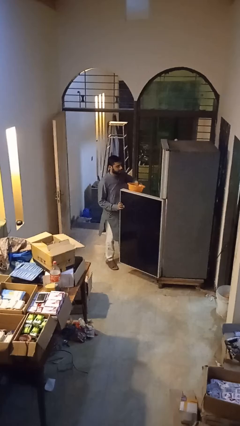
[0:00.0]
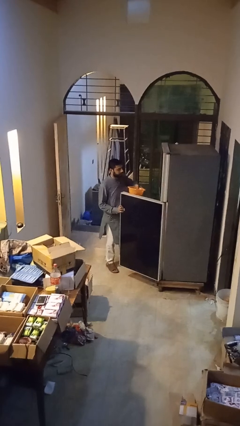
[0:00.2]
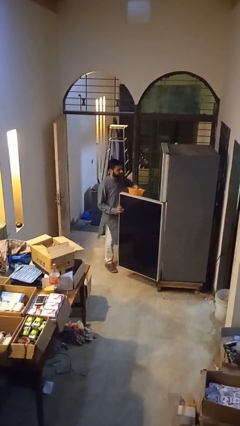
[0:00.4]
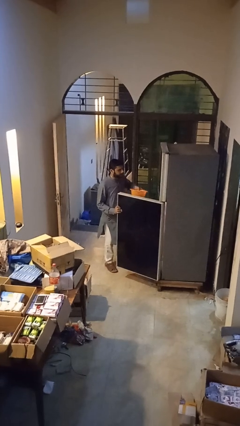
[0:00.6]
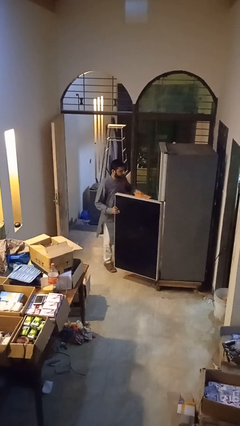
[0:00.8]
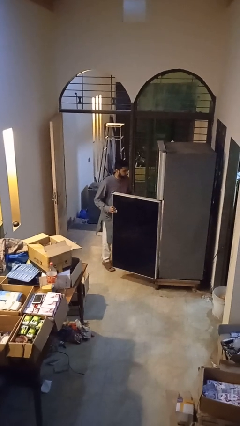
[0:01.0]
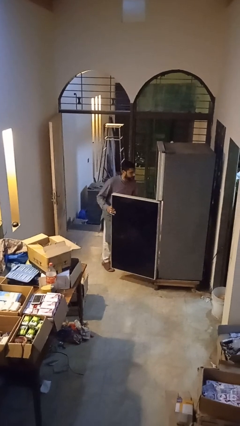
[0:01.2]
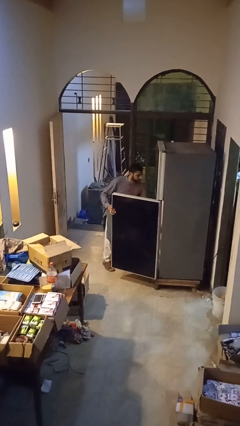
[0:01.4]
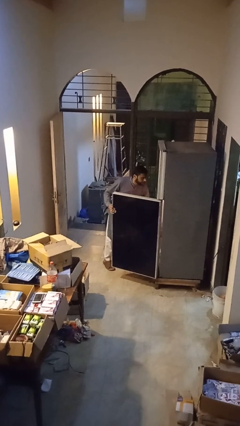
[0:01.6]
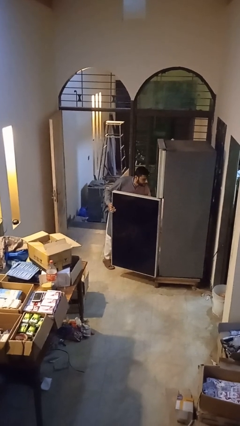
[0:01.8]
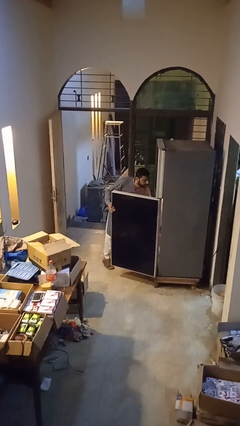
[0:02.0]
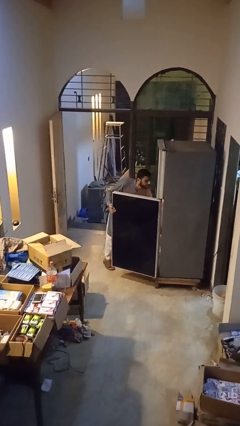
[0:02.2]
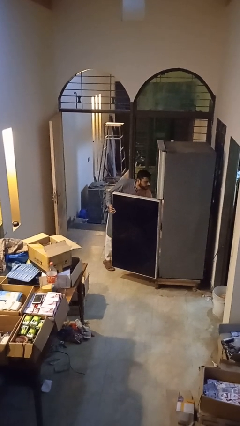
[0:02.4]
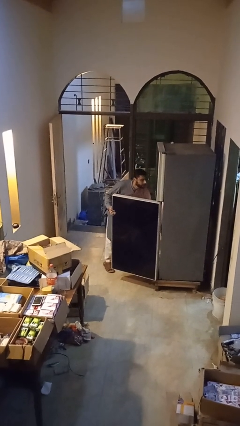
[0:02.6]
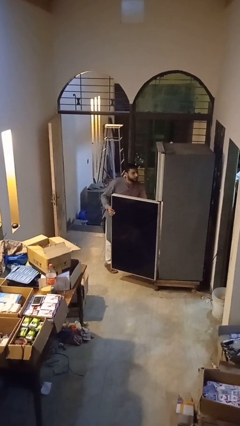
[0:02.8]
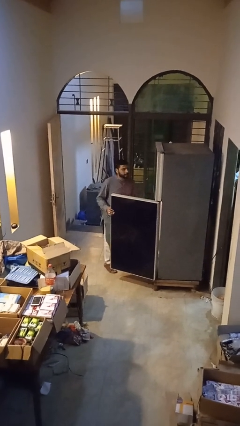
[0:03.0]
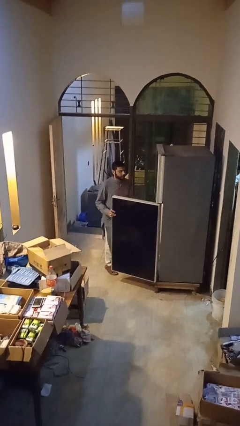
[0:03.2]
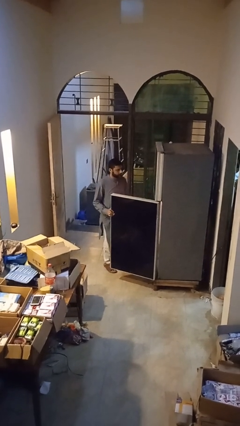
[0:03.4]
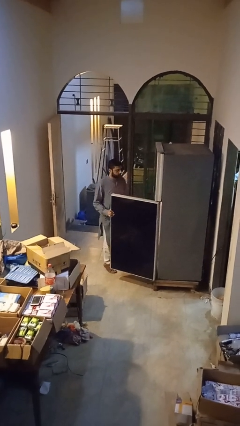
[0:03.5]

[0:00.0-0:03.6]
person takes object from refrigerator

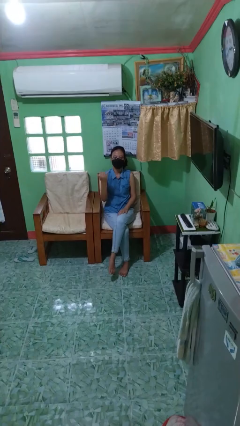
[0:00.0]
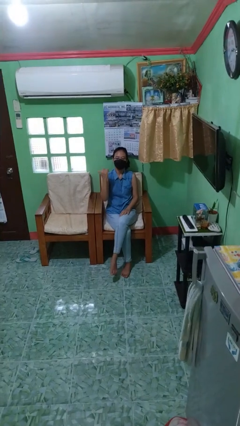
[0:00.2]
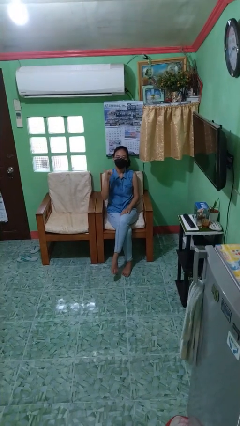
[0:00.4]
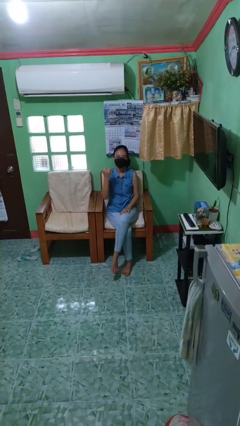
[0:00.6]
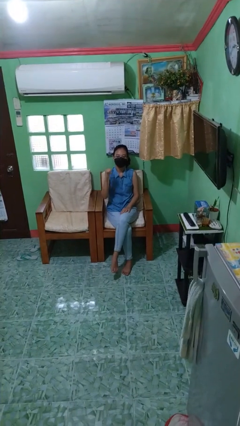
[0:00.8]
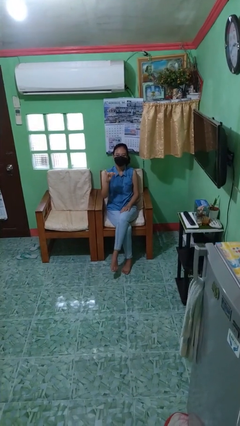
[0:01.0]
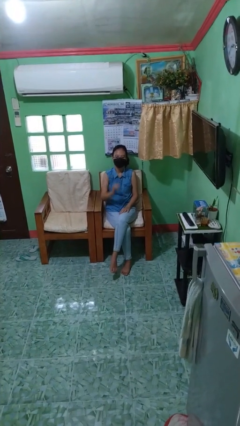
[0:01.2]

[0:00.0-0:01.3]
person gestures hang loose

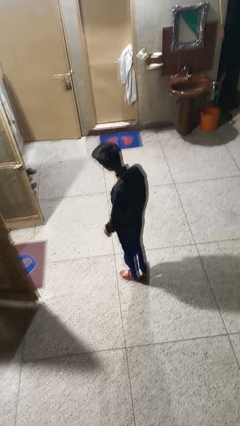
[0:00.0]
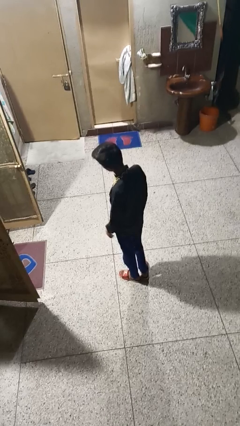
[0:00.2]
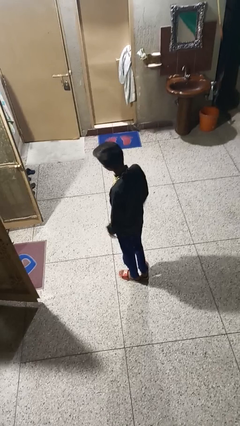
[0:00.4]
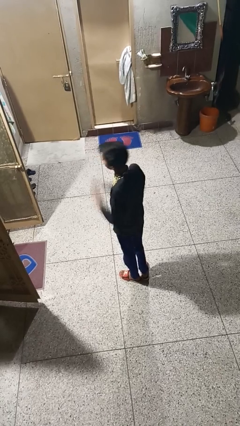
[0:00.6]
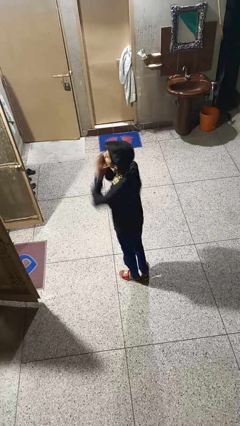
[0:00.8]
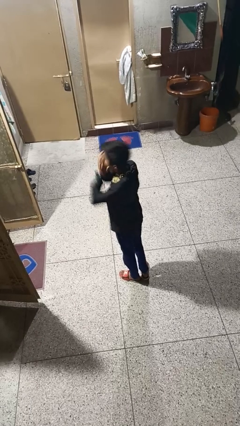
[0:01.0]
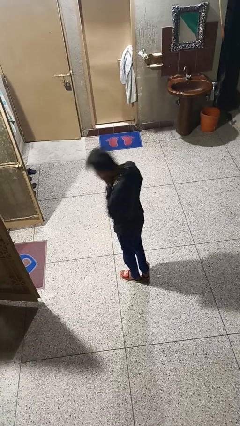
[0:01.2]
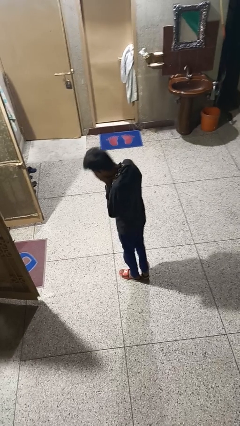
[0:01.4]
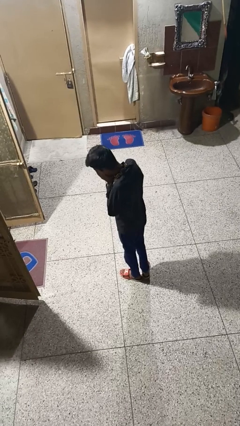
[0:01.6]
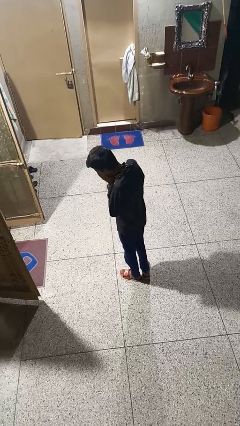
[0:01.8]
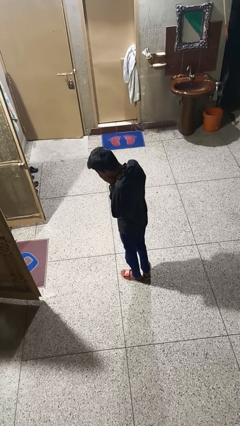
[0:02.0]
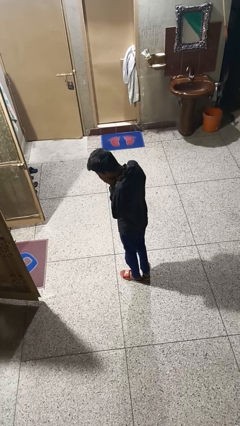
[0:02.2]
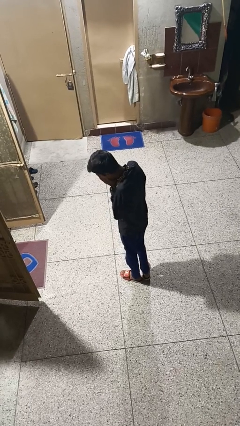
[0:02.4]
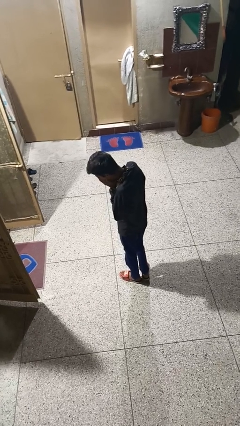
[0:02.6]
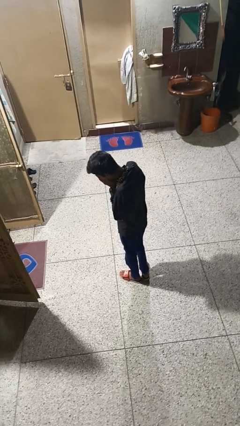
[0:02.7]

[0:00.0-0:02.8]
person sneezes into hand

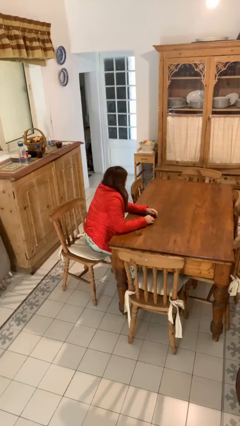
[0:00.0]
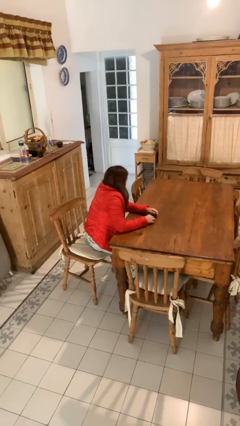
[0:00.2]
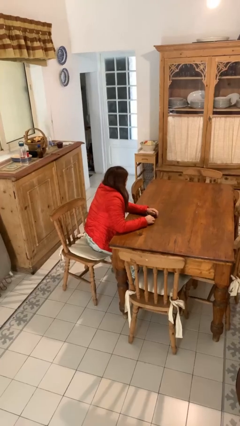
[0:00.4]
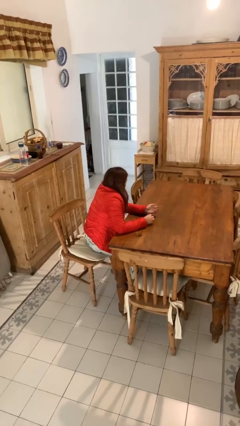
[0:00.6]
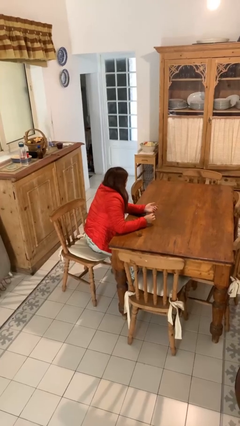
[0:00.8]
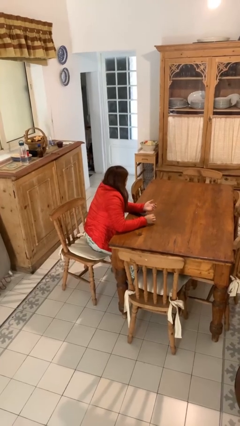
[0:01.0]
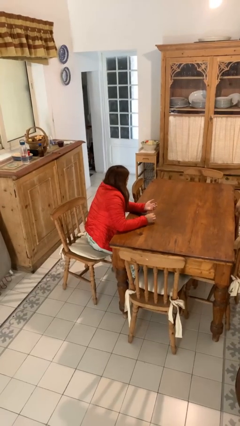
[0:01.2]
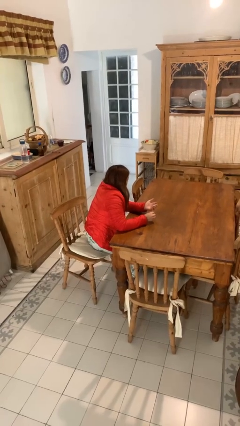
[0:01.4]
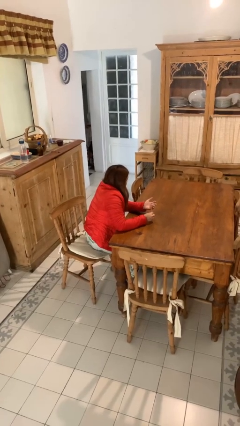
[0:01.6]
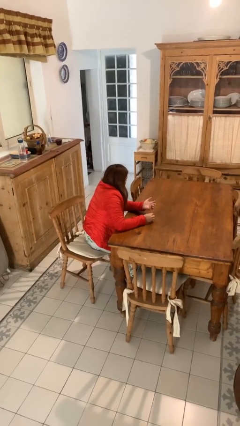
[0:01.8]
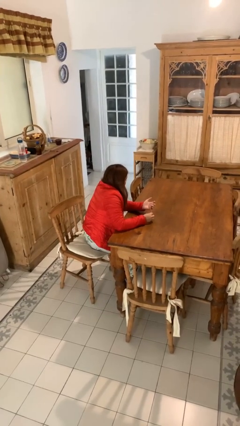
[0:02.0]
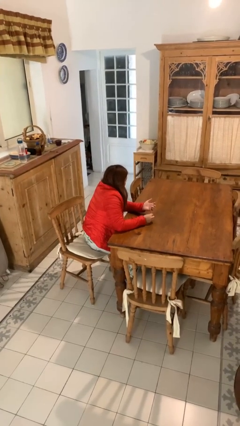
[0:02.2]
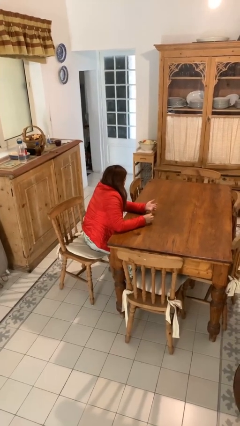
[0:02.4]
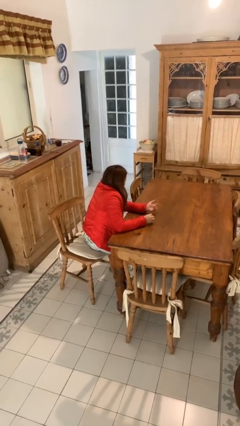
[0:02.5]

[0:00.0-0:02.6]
person files fingernails

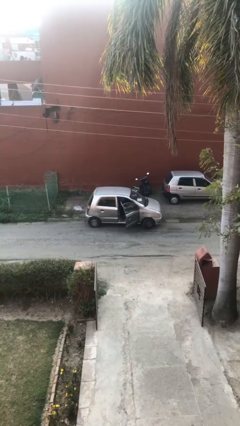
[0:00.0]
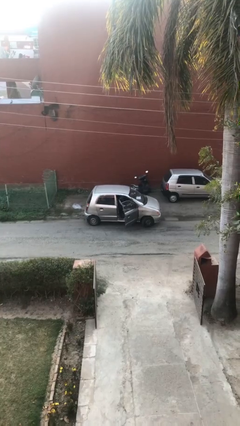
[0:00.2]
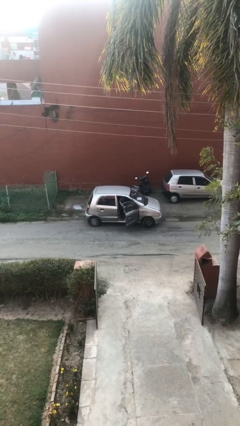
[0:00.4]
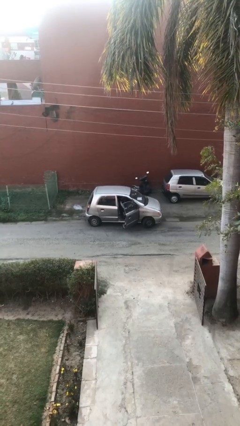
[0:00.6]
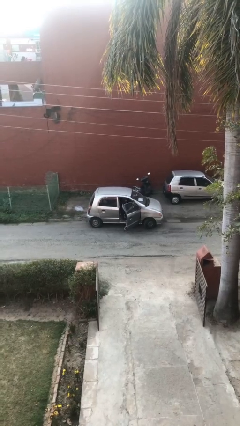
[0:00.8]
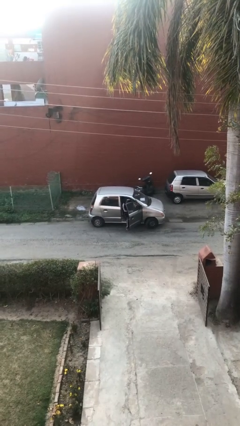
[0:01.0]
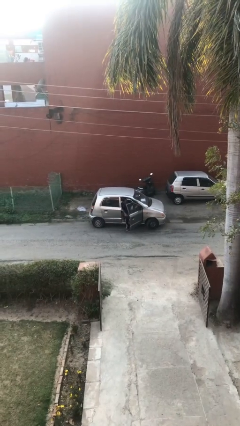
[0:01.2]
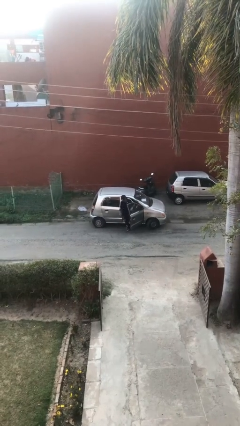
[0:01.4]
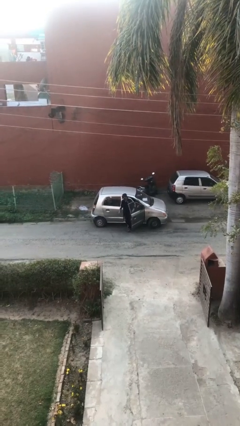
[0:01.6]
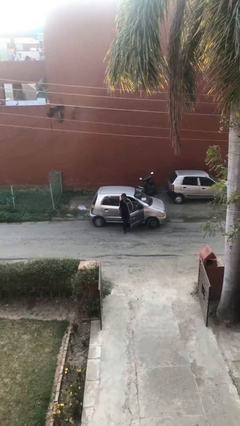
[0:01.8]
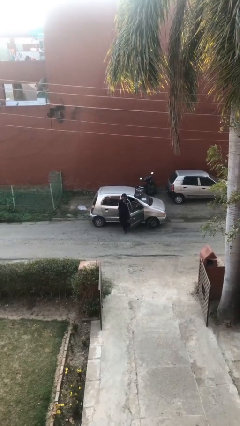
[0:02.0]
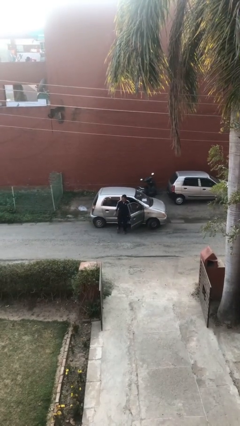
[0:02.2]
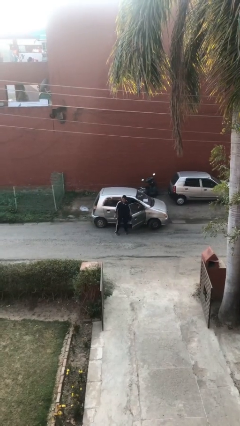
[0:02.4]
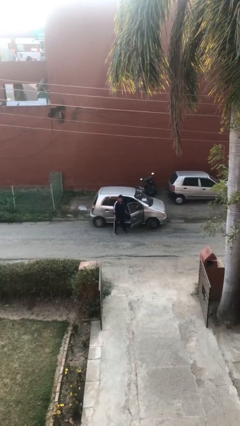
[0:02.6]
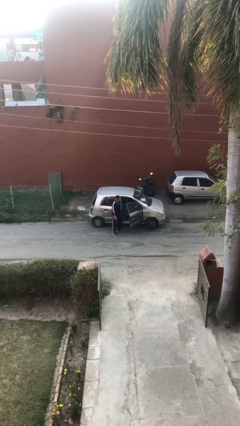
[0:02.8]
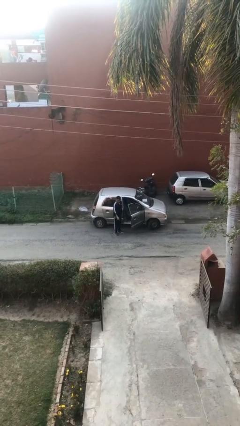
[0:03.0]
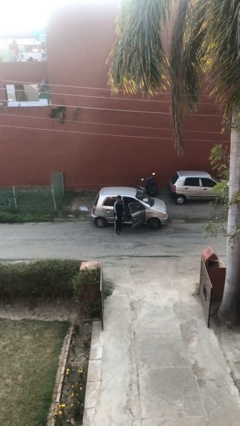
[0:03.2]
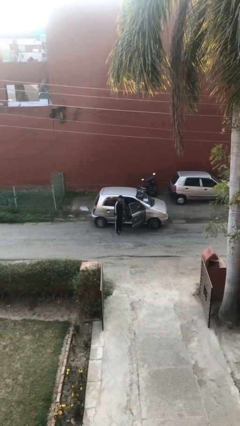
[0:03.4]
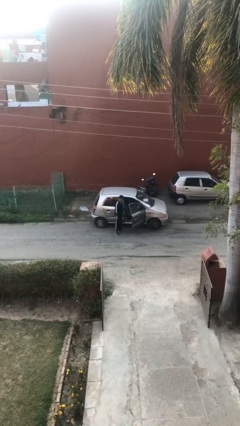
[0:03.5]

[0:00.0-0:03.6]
person exits car

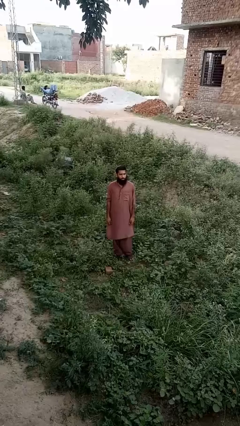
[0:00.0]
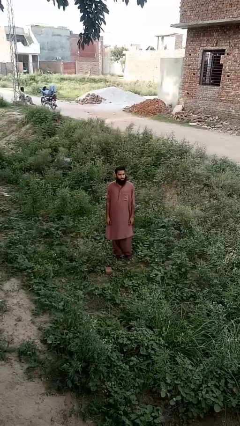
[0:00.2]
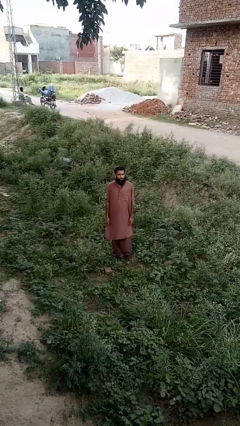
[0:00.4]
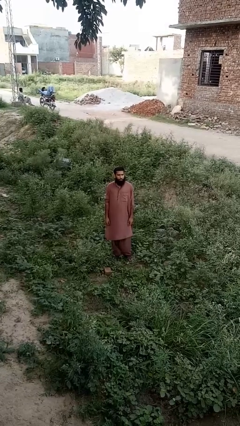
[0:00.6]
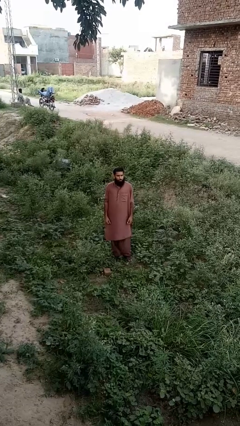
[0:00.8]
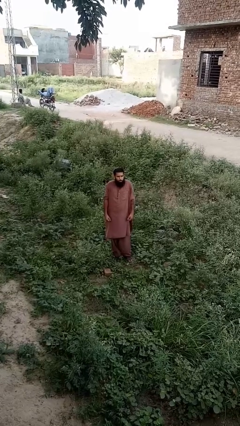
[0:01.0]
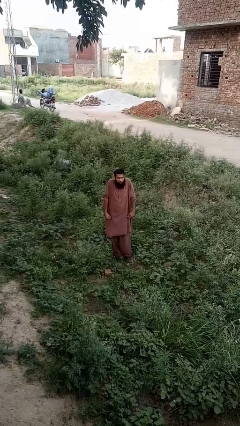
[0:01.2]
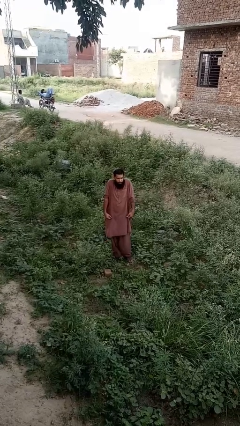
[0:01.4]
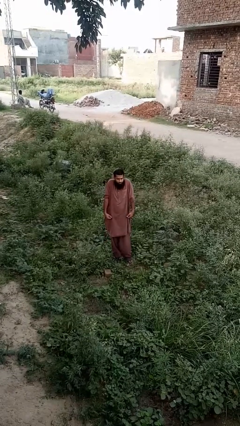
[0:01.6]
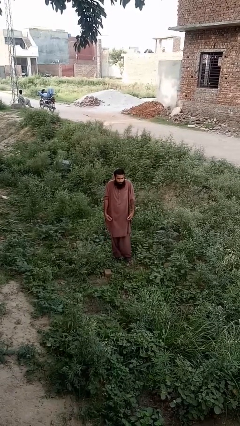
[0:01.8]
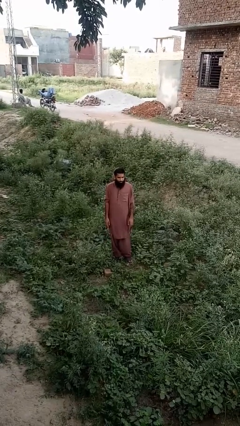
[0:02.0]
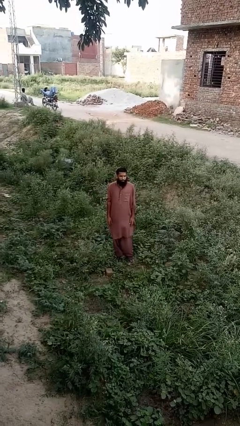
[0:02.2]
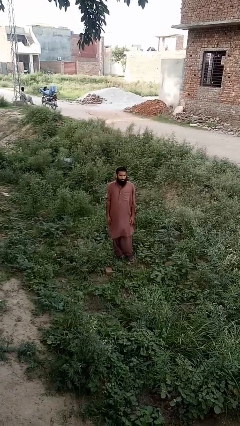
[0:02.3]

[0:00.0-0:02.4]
person shrugs

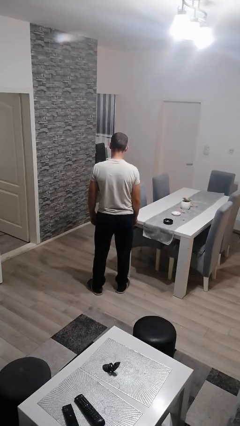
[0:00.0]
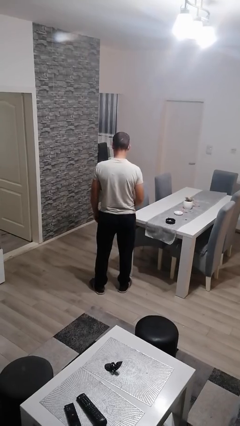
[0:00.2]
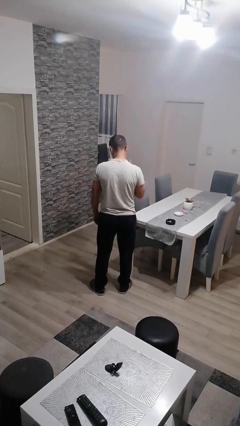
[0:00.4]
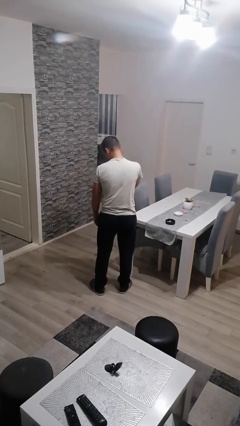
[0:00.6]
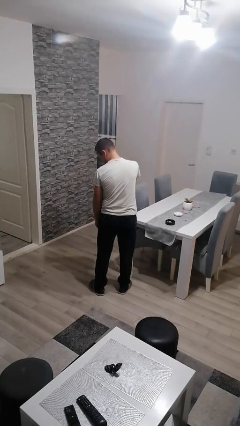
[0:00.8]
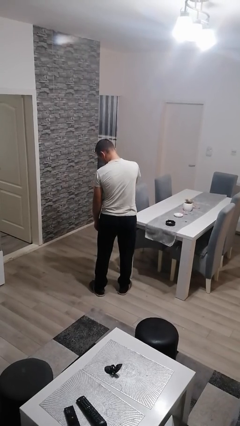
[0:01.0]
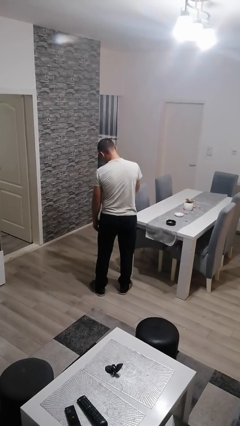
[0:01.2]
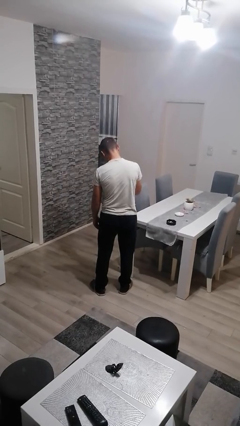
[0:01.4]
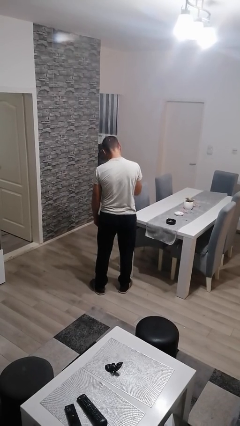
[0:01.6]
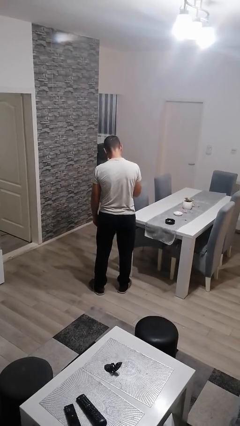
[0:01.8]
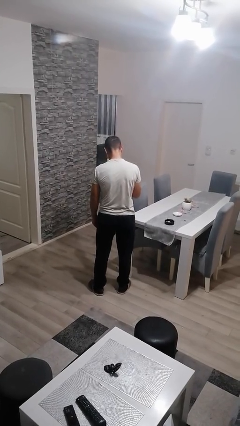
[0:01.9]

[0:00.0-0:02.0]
person swats bug
